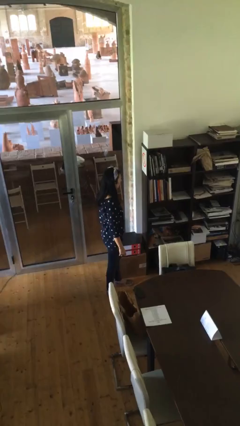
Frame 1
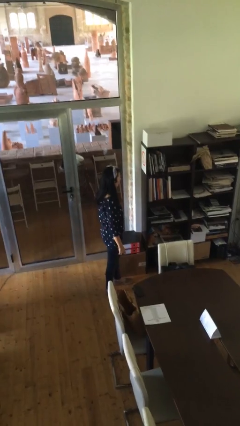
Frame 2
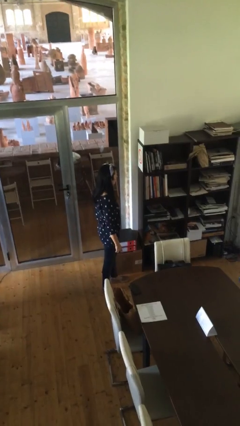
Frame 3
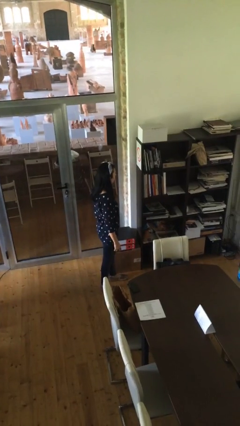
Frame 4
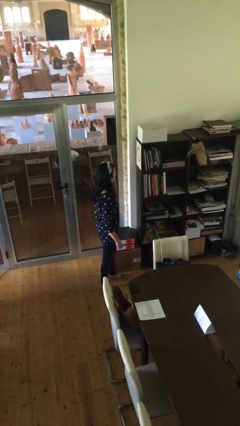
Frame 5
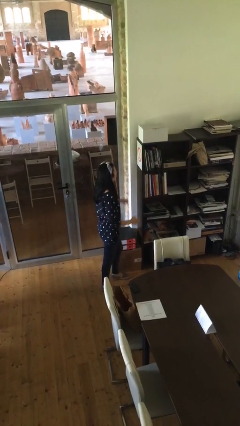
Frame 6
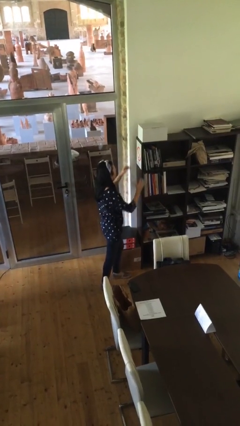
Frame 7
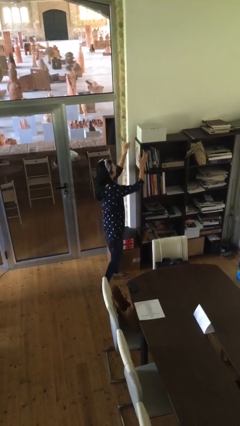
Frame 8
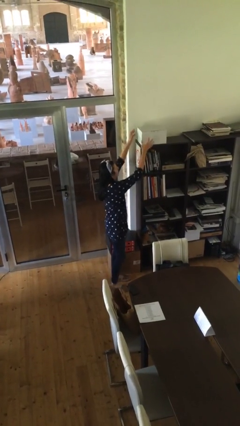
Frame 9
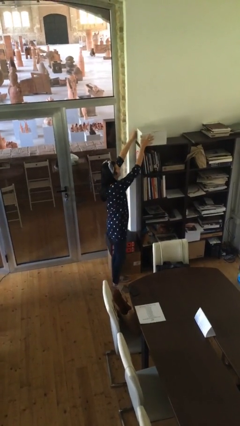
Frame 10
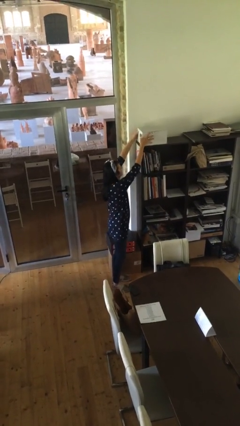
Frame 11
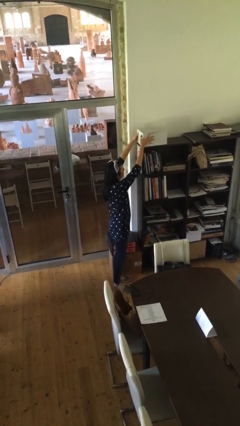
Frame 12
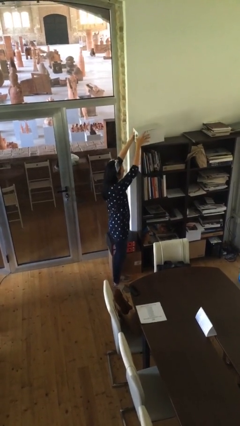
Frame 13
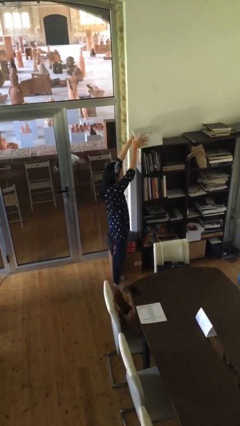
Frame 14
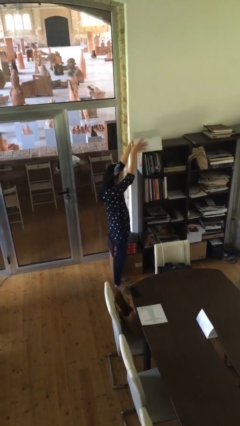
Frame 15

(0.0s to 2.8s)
person picks up object from shelf

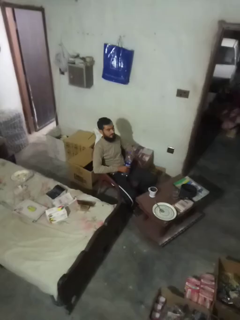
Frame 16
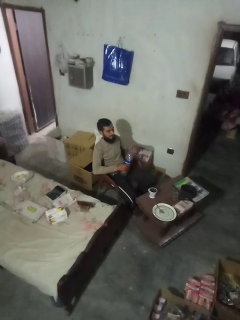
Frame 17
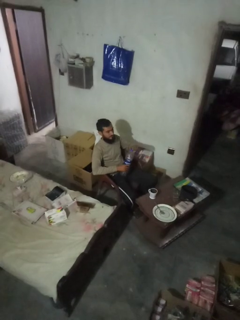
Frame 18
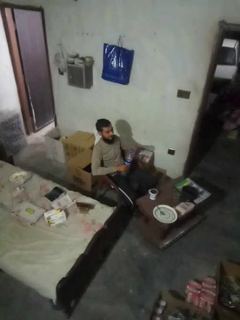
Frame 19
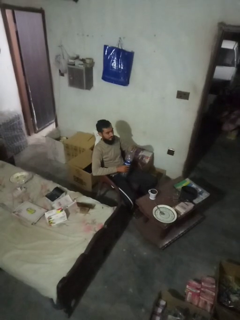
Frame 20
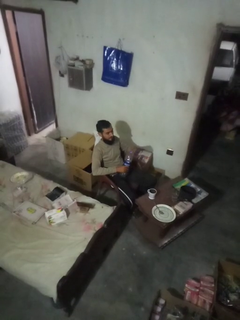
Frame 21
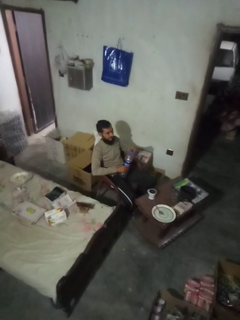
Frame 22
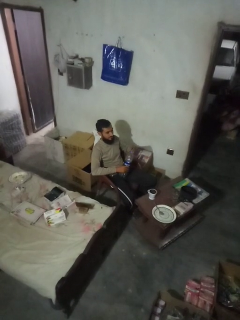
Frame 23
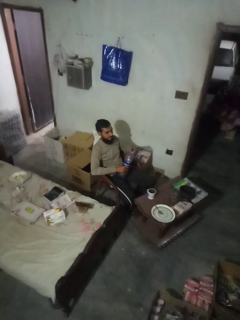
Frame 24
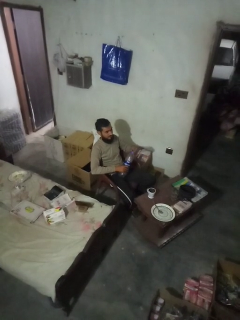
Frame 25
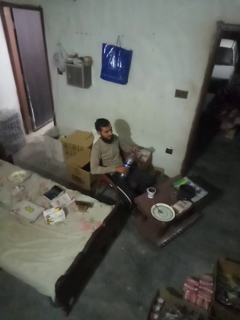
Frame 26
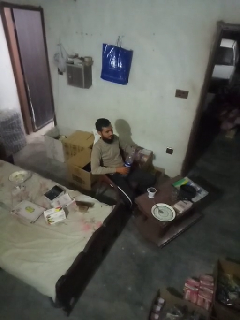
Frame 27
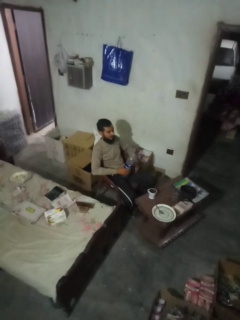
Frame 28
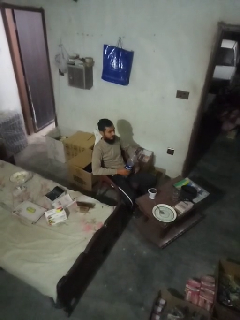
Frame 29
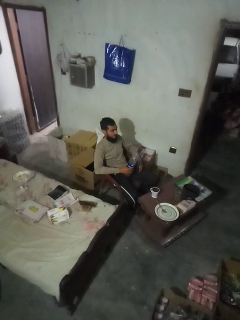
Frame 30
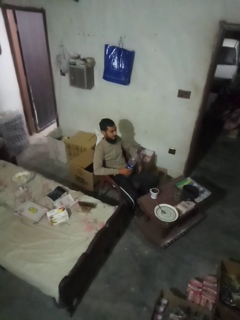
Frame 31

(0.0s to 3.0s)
person unscrews lid from bottle

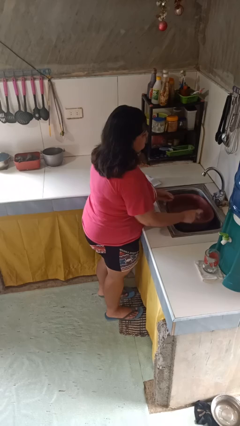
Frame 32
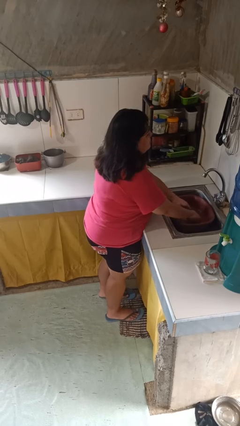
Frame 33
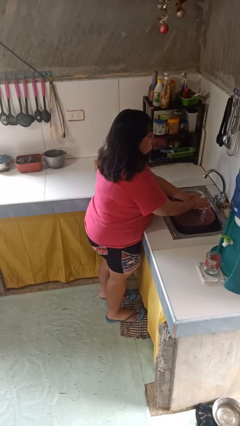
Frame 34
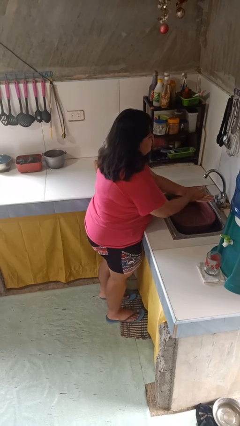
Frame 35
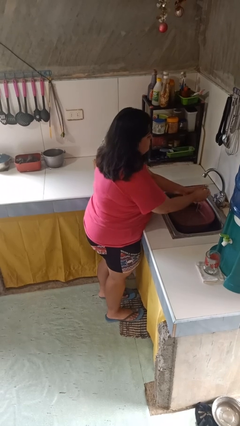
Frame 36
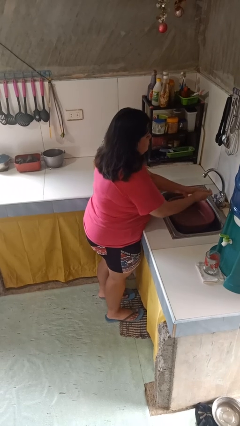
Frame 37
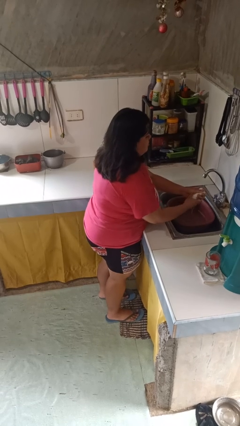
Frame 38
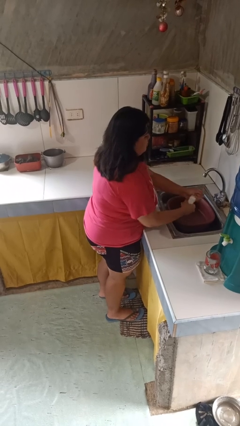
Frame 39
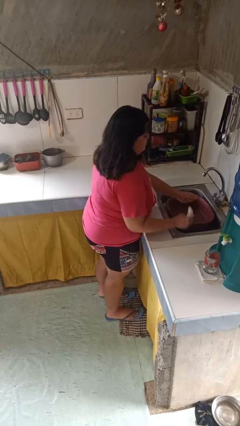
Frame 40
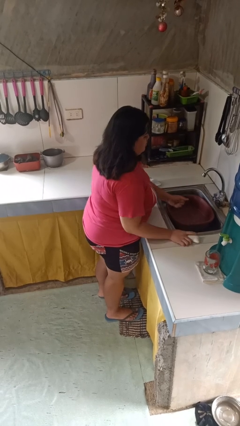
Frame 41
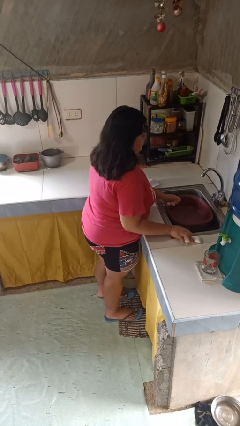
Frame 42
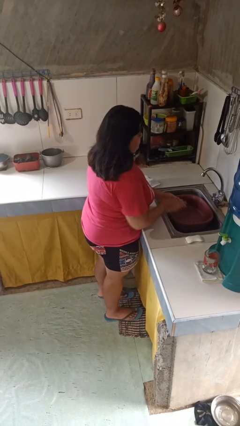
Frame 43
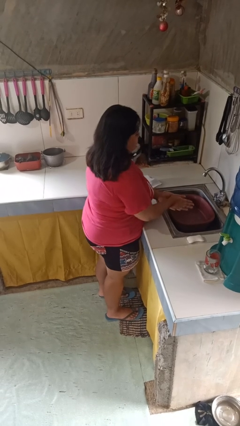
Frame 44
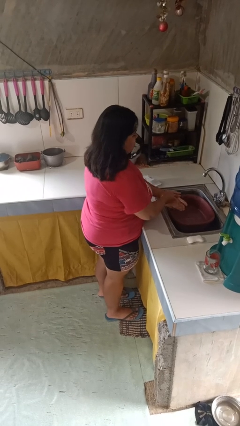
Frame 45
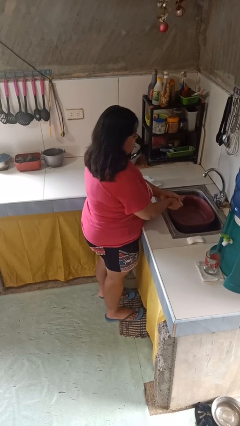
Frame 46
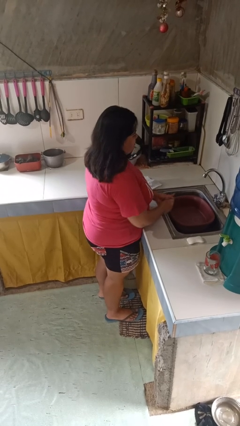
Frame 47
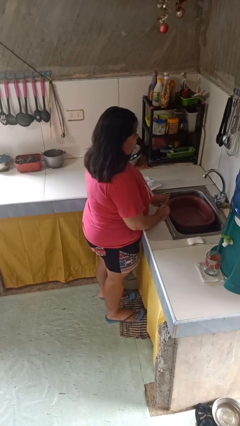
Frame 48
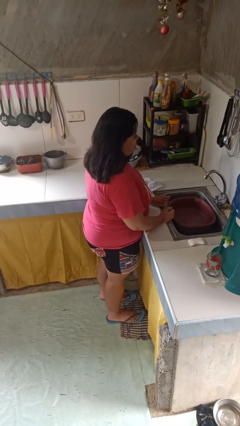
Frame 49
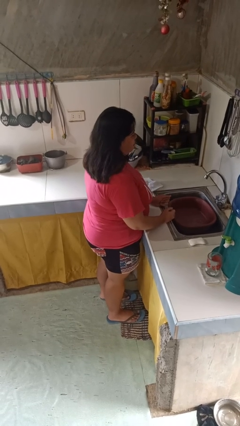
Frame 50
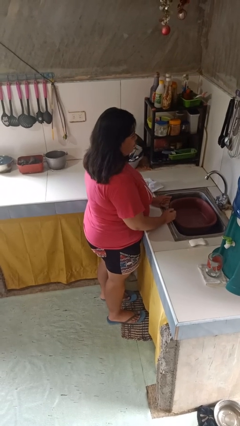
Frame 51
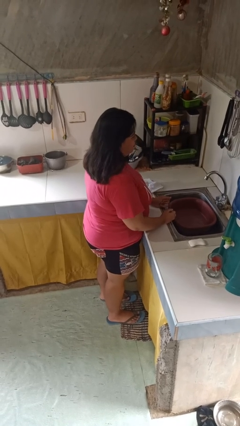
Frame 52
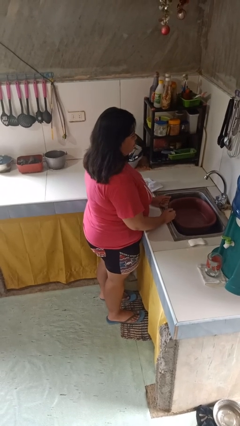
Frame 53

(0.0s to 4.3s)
person washes hands

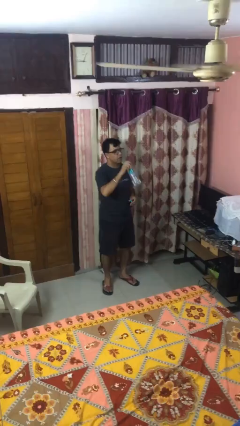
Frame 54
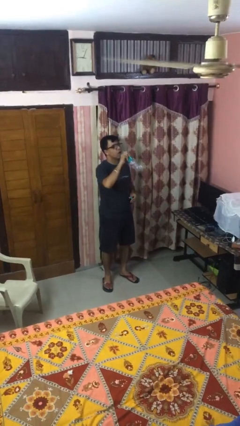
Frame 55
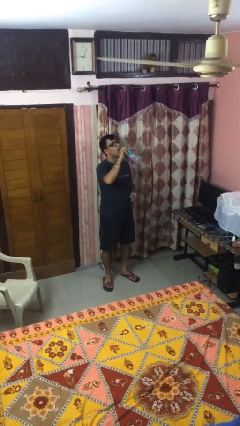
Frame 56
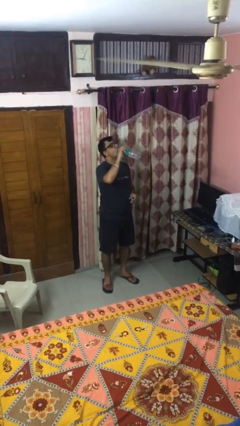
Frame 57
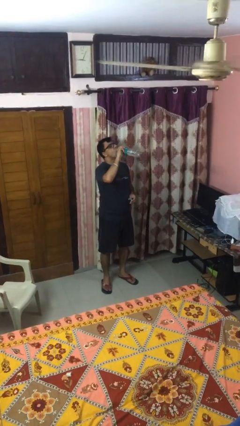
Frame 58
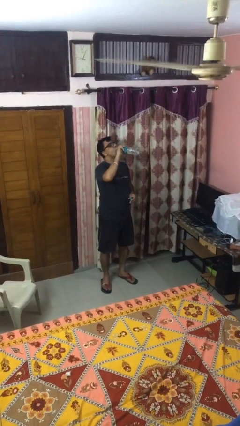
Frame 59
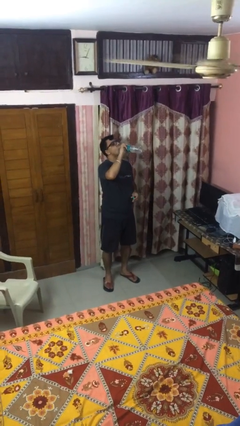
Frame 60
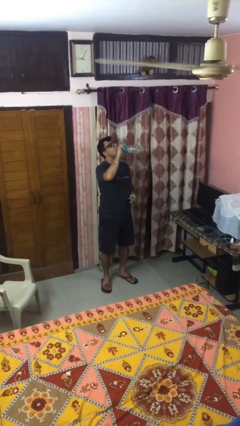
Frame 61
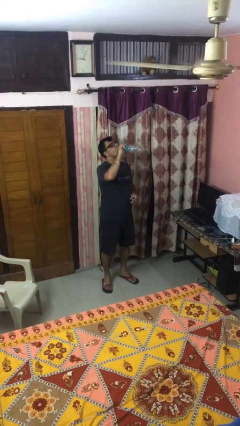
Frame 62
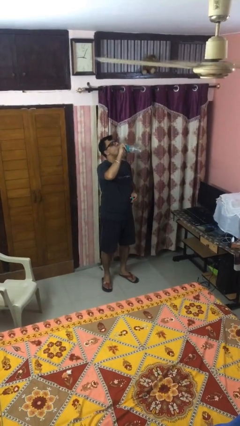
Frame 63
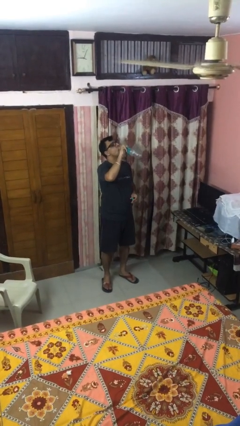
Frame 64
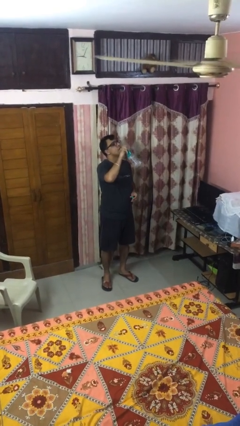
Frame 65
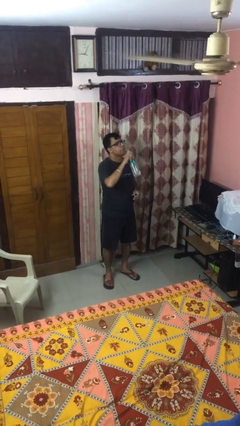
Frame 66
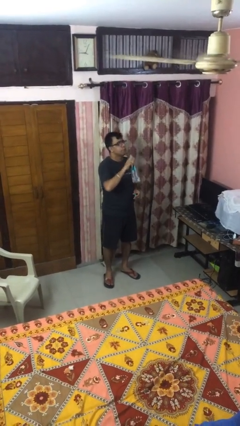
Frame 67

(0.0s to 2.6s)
person drinks from bottle

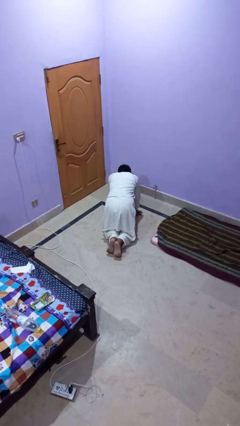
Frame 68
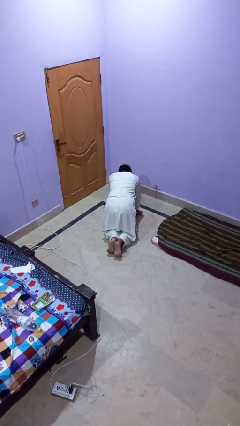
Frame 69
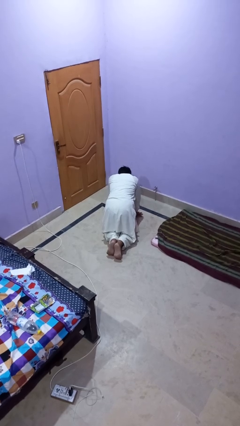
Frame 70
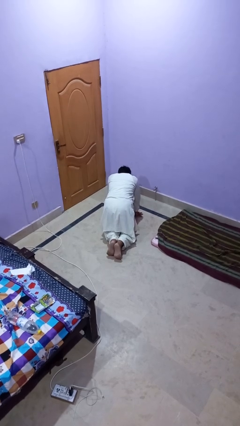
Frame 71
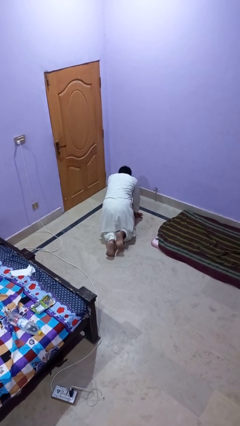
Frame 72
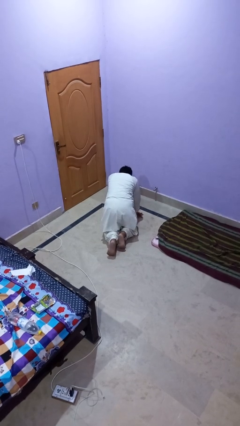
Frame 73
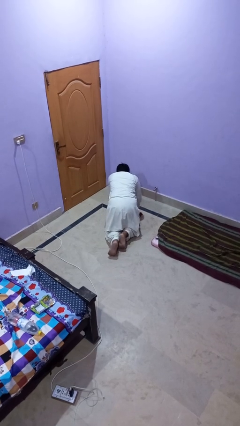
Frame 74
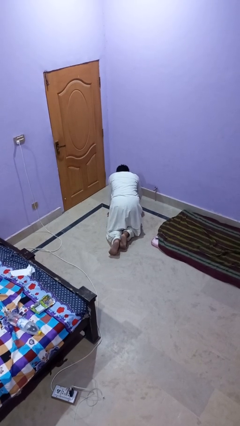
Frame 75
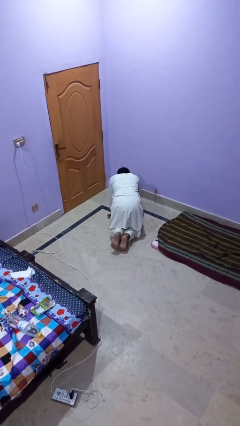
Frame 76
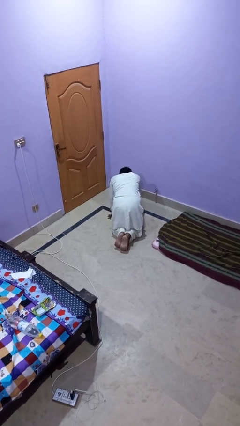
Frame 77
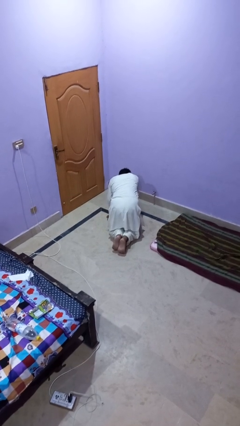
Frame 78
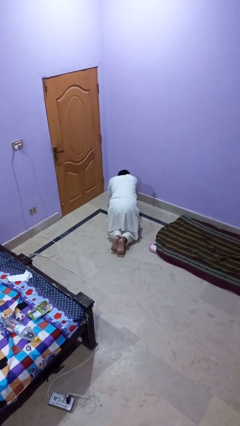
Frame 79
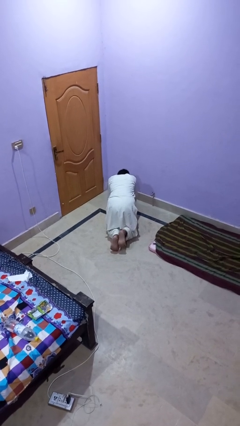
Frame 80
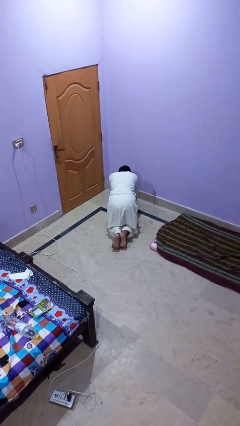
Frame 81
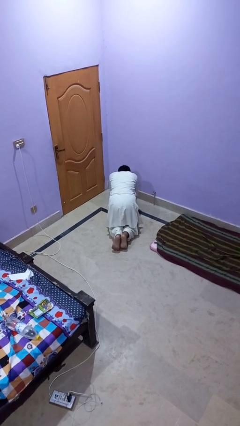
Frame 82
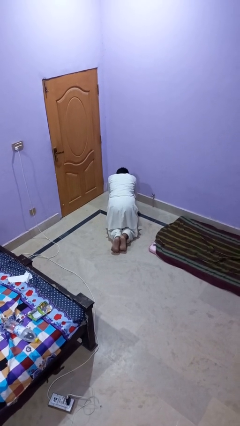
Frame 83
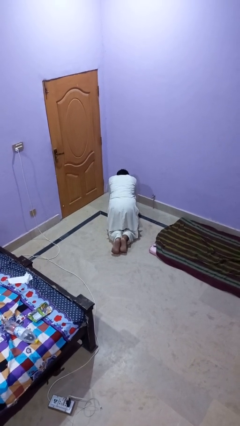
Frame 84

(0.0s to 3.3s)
person crawls

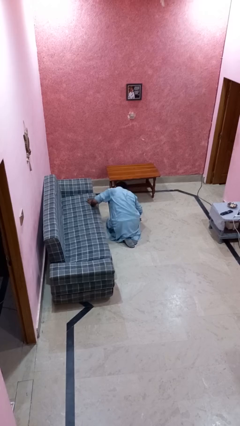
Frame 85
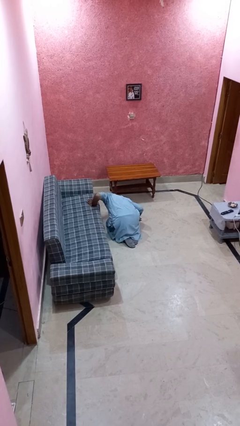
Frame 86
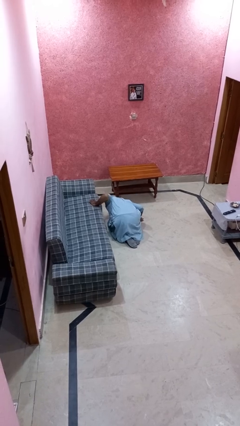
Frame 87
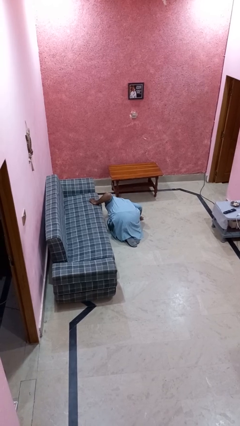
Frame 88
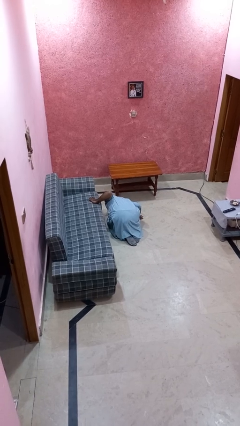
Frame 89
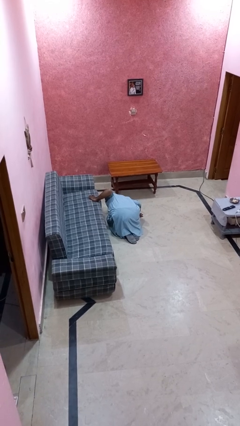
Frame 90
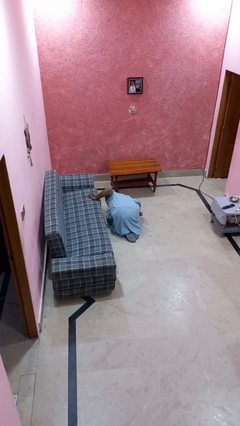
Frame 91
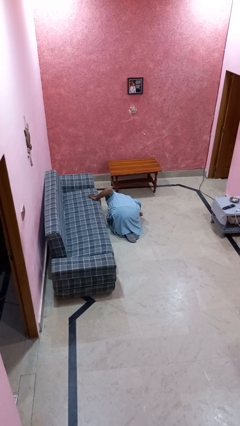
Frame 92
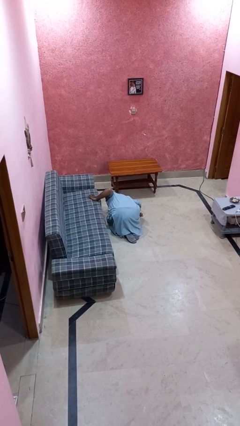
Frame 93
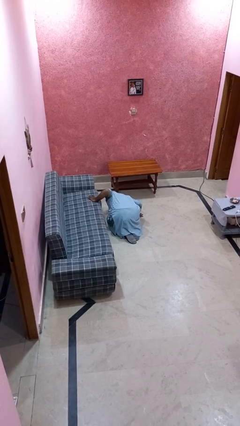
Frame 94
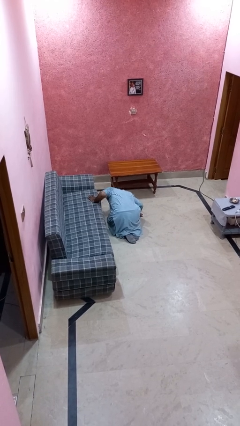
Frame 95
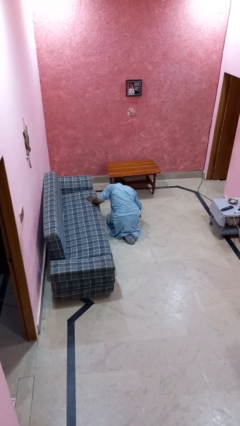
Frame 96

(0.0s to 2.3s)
person searches under couch

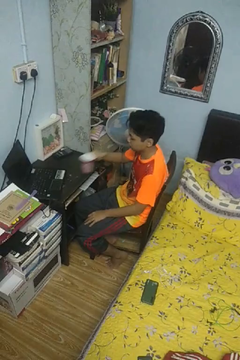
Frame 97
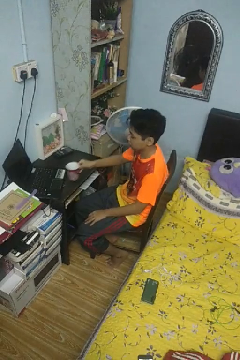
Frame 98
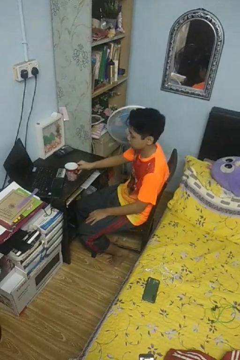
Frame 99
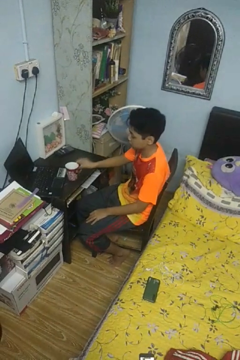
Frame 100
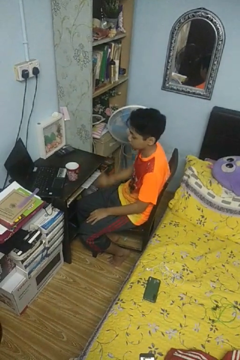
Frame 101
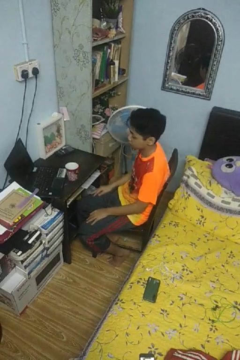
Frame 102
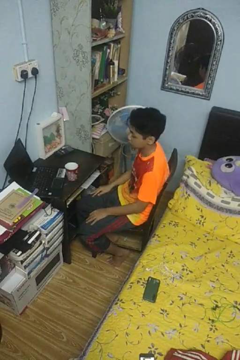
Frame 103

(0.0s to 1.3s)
person opens refrigerator
